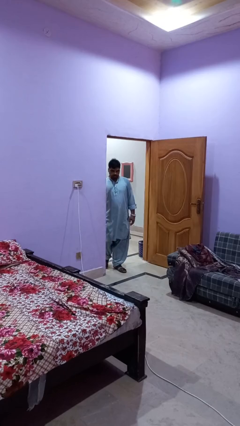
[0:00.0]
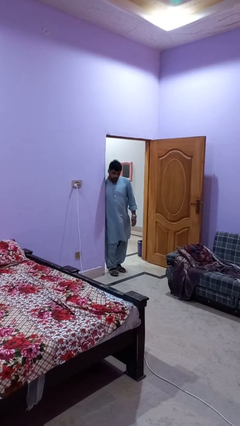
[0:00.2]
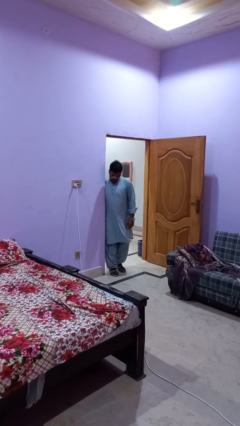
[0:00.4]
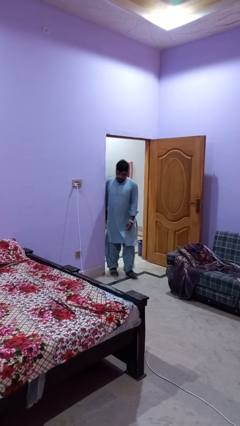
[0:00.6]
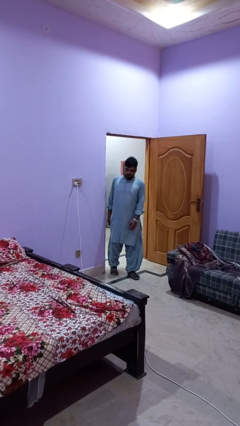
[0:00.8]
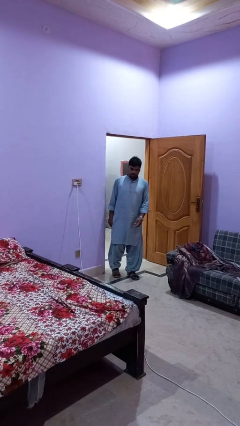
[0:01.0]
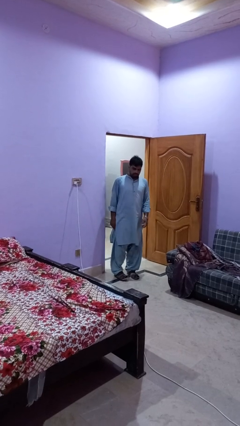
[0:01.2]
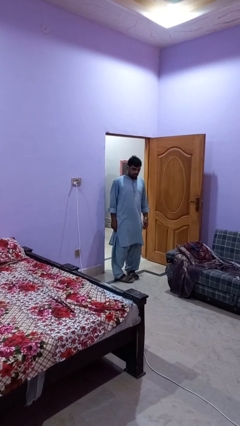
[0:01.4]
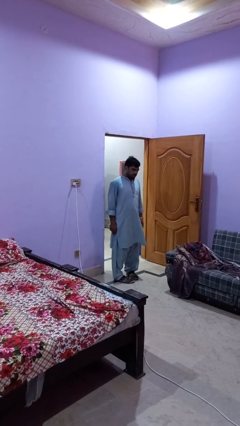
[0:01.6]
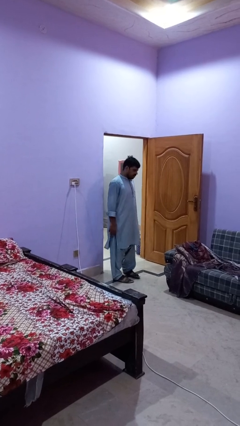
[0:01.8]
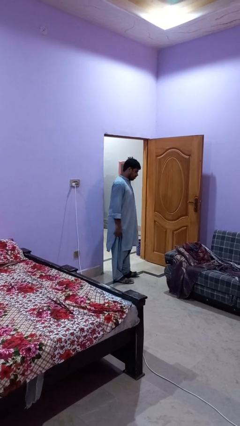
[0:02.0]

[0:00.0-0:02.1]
person bumps into wall

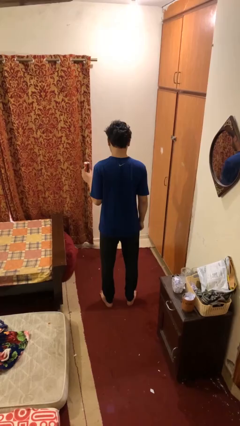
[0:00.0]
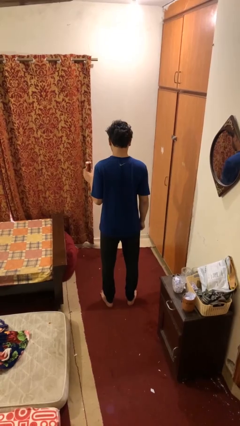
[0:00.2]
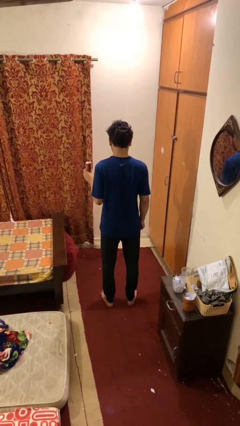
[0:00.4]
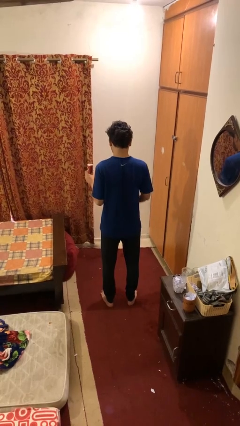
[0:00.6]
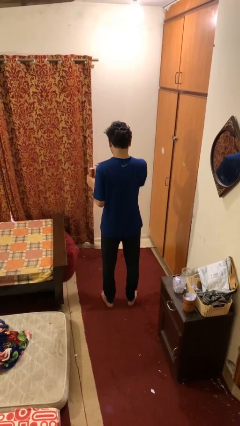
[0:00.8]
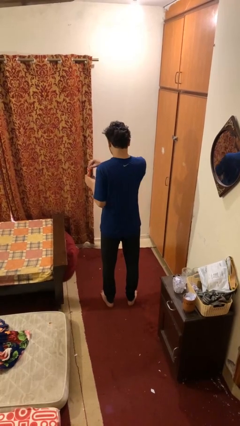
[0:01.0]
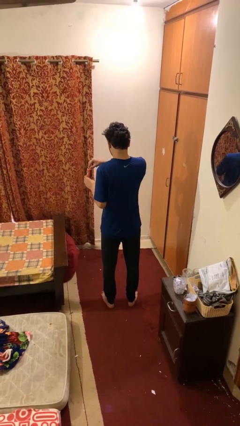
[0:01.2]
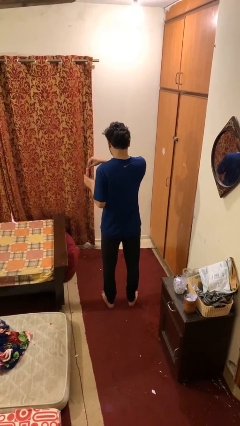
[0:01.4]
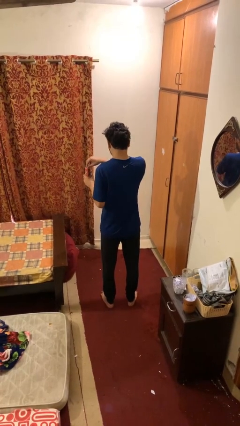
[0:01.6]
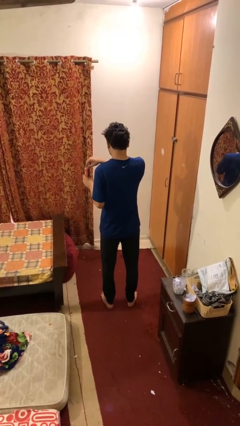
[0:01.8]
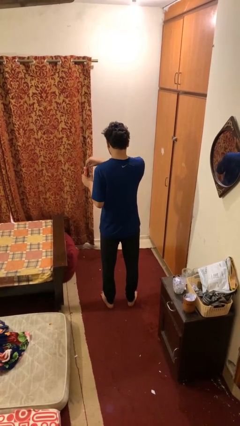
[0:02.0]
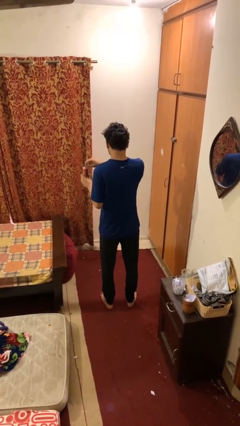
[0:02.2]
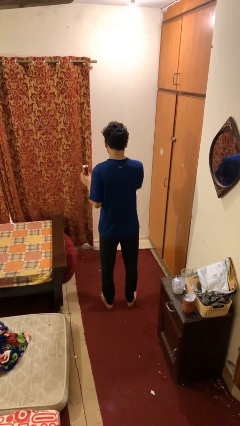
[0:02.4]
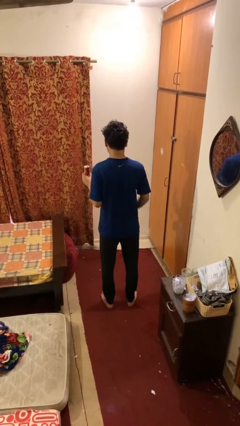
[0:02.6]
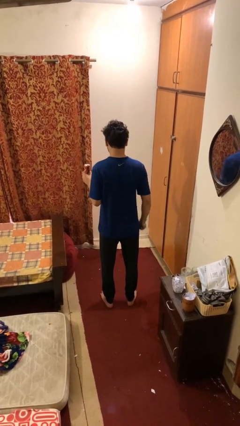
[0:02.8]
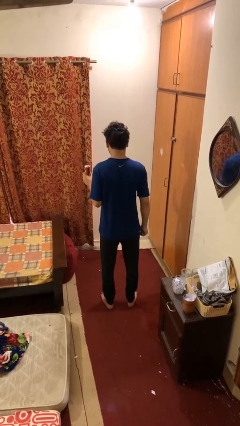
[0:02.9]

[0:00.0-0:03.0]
person opens beverage can

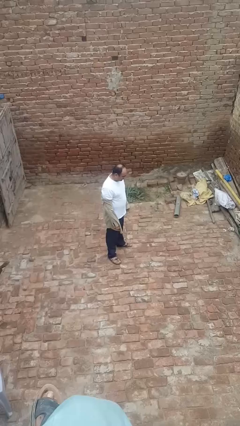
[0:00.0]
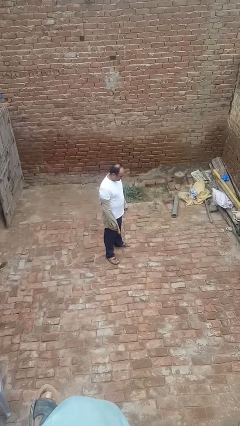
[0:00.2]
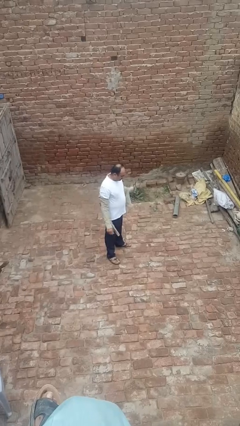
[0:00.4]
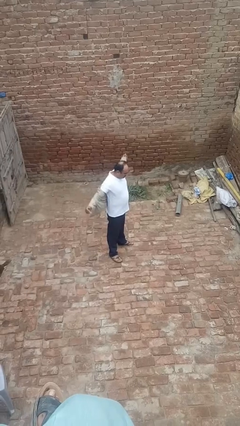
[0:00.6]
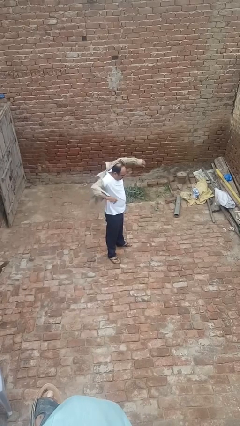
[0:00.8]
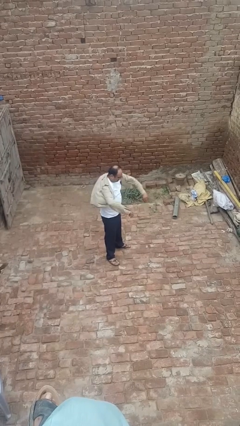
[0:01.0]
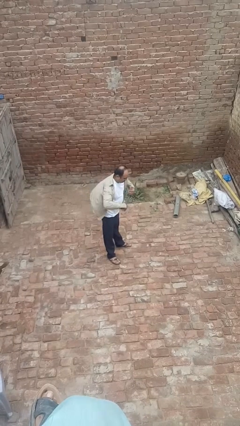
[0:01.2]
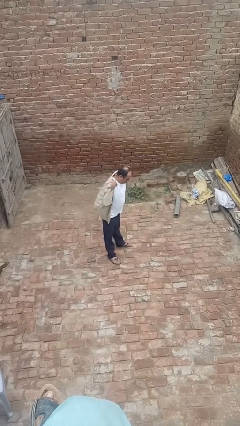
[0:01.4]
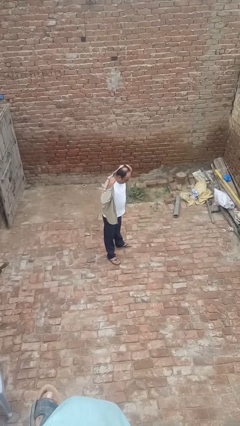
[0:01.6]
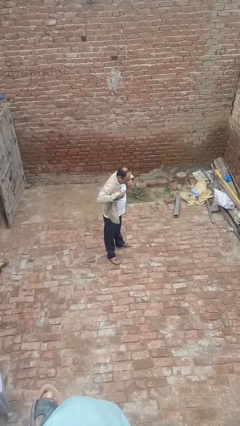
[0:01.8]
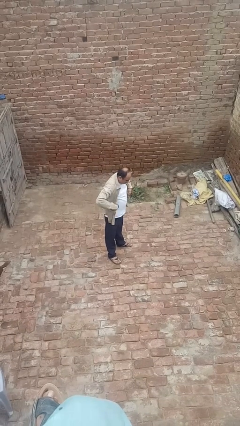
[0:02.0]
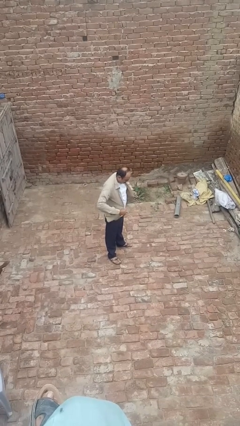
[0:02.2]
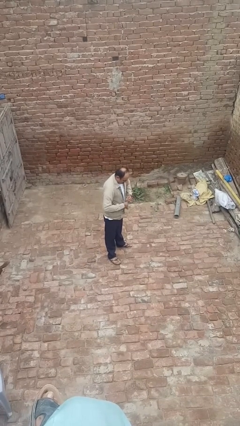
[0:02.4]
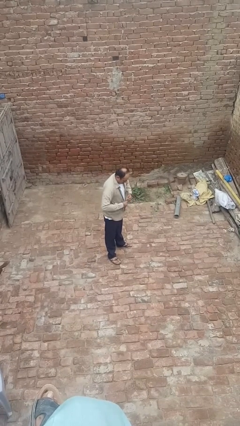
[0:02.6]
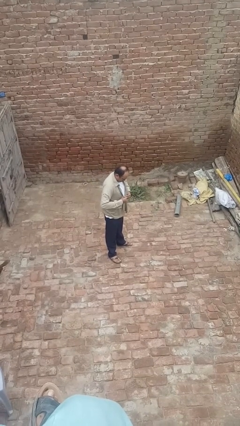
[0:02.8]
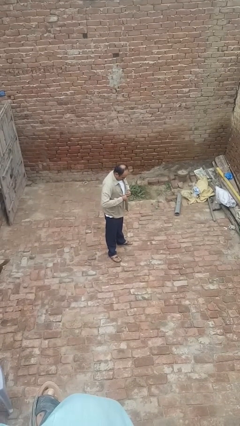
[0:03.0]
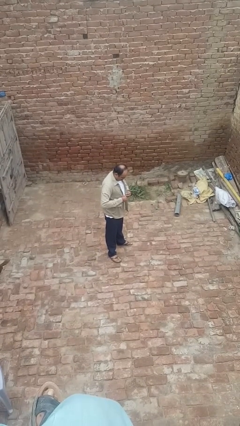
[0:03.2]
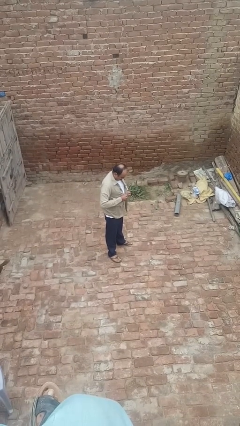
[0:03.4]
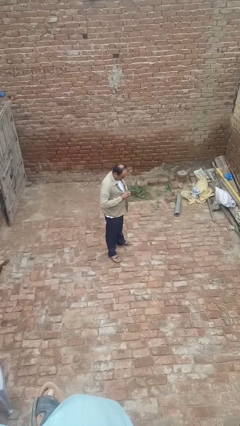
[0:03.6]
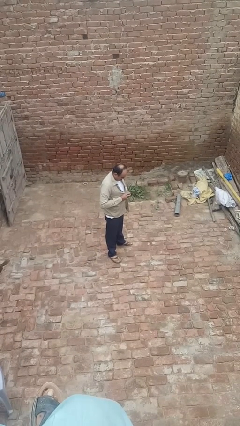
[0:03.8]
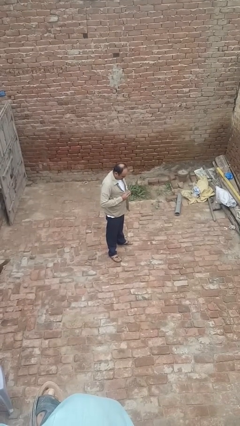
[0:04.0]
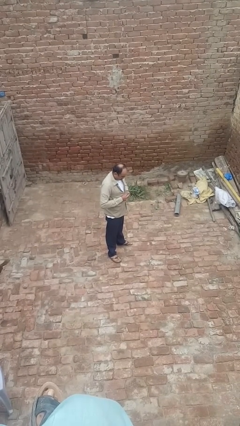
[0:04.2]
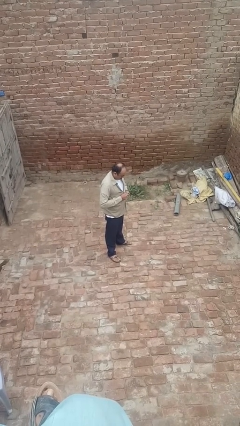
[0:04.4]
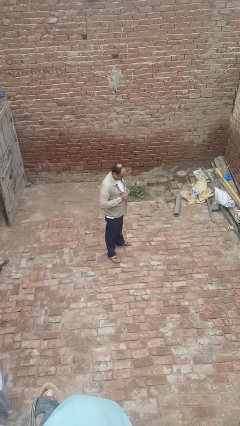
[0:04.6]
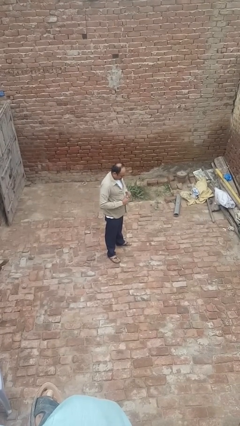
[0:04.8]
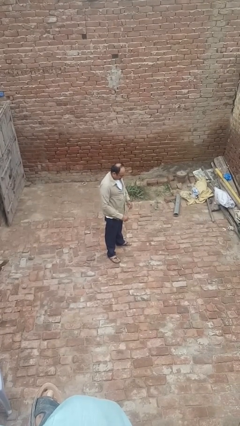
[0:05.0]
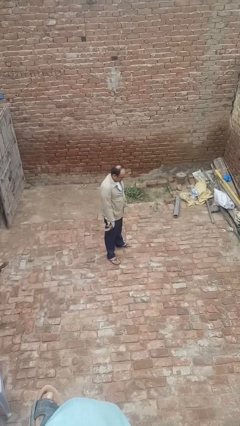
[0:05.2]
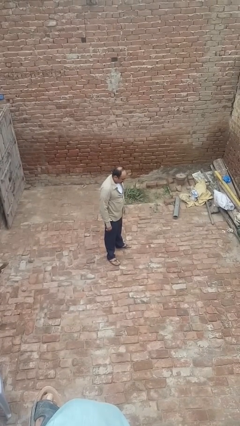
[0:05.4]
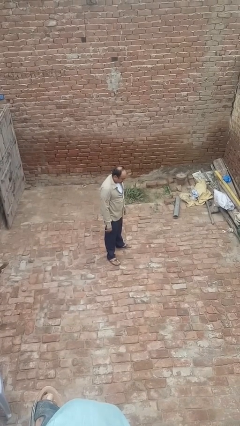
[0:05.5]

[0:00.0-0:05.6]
person puts on shirt

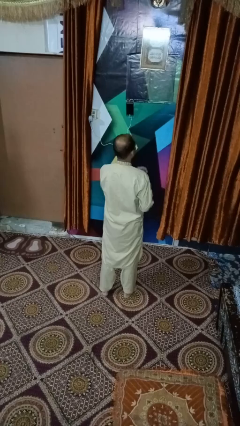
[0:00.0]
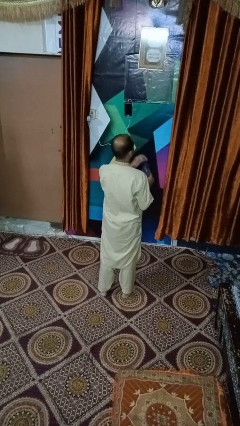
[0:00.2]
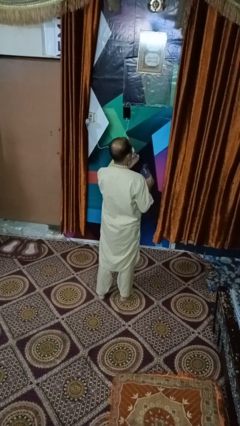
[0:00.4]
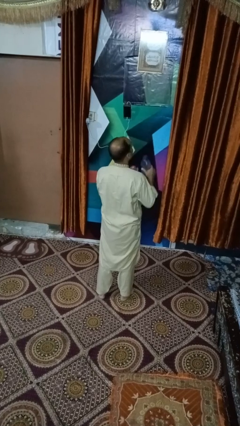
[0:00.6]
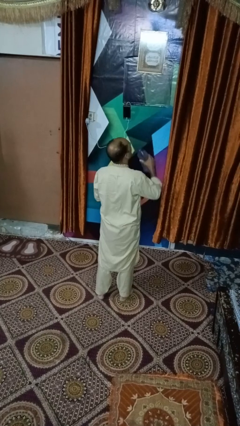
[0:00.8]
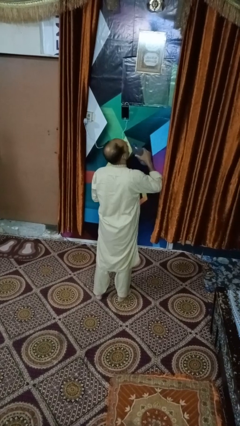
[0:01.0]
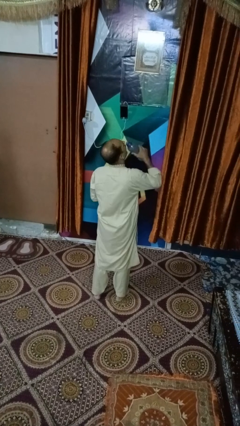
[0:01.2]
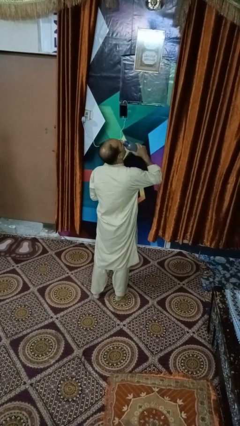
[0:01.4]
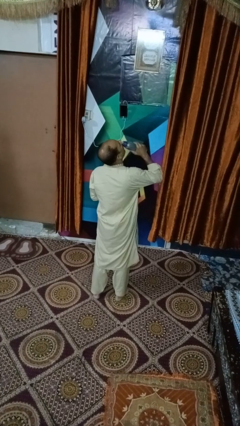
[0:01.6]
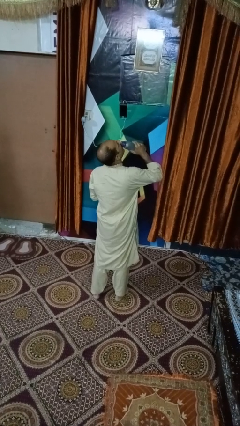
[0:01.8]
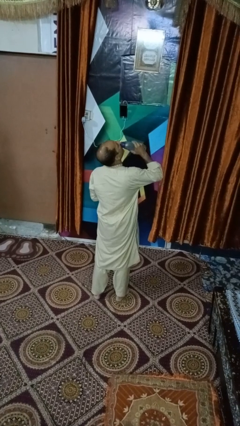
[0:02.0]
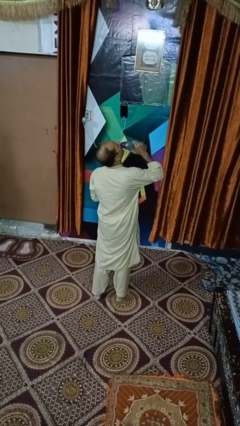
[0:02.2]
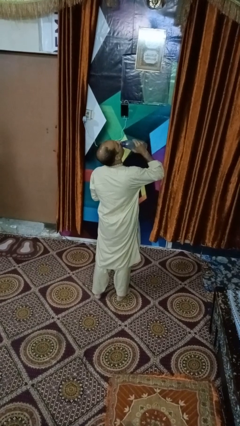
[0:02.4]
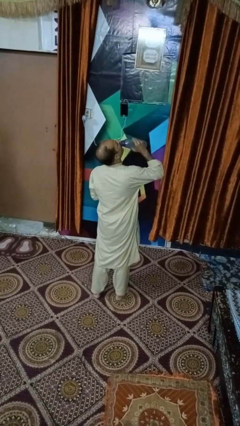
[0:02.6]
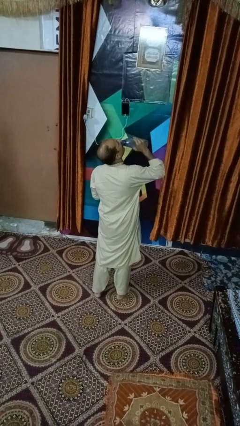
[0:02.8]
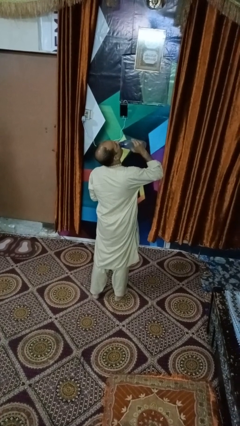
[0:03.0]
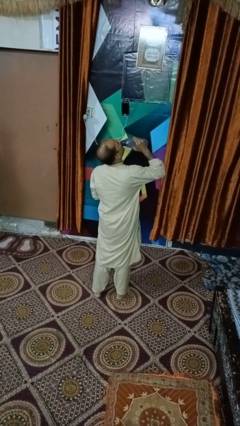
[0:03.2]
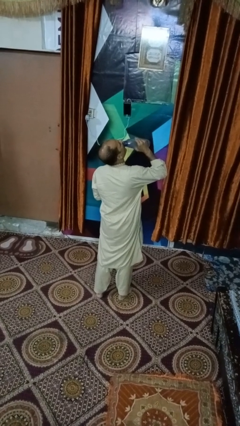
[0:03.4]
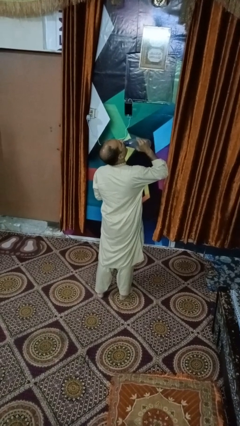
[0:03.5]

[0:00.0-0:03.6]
person drinks from bottle

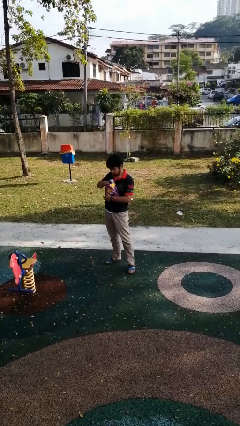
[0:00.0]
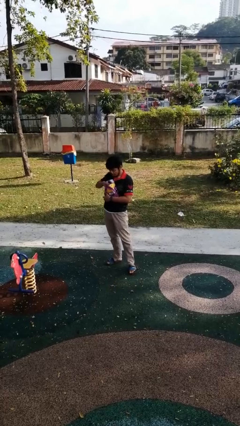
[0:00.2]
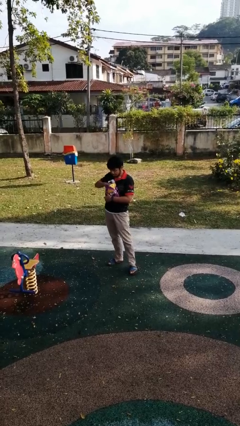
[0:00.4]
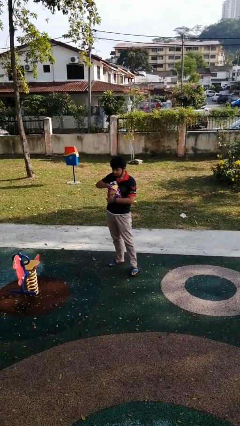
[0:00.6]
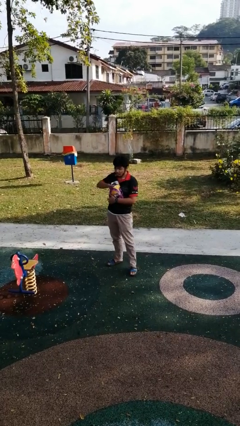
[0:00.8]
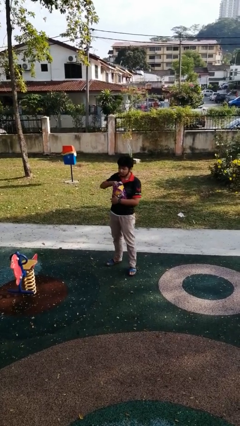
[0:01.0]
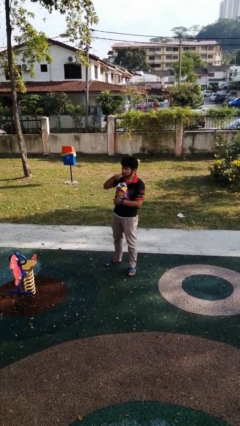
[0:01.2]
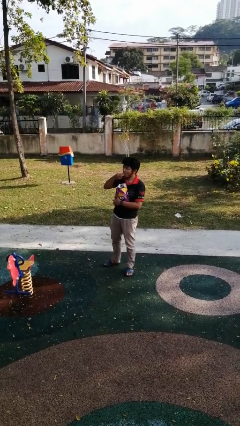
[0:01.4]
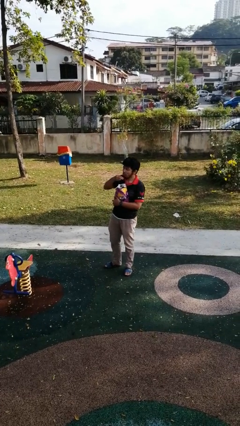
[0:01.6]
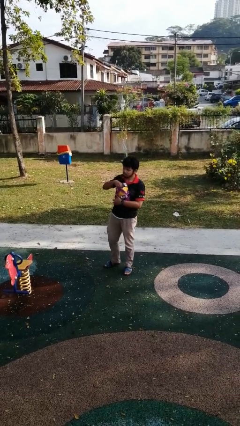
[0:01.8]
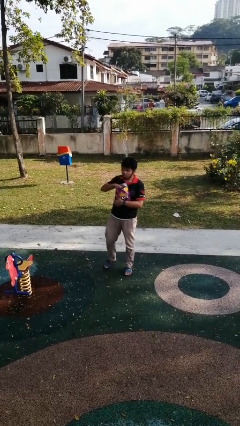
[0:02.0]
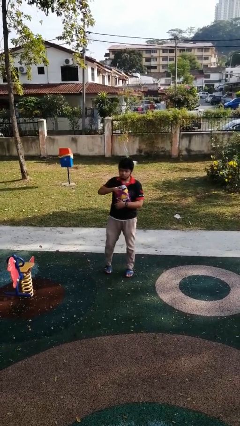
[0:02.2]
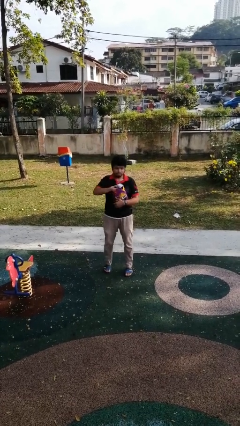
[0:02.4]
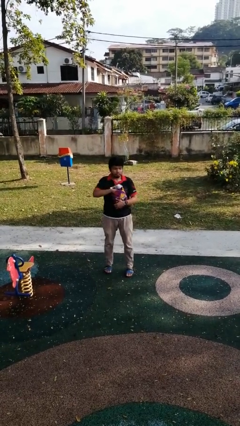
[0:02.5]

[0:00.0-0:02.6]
person eats snack from bag

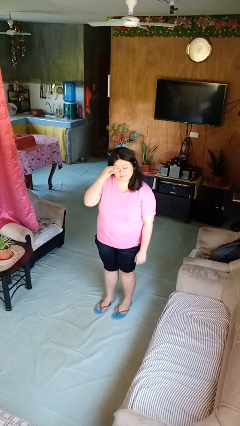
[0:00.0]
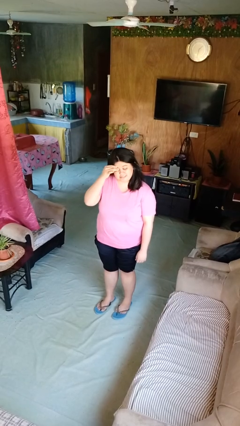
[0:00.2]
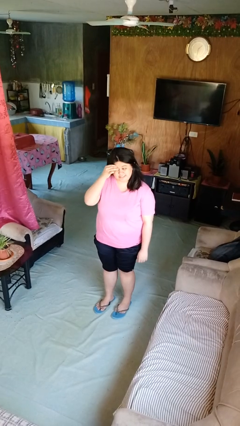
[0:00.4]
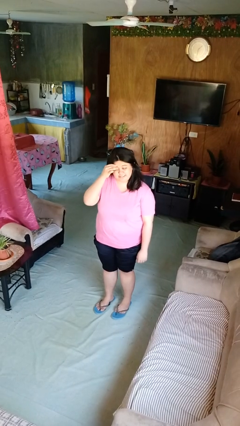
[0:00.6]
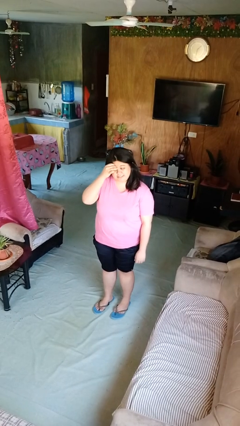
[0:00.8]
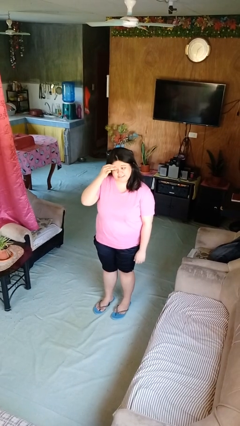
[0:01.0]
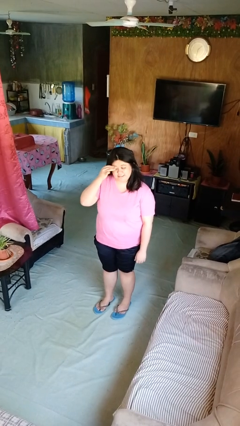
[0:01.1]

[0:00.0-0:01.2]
person scratches face
